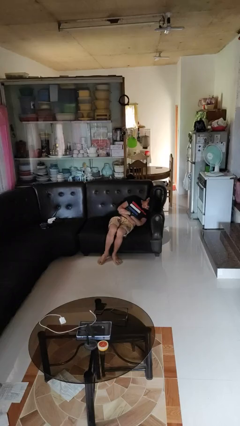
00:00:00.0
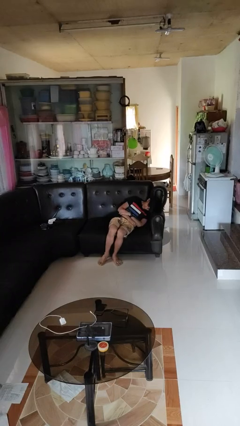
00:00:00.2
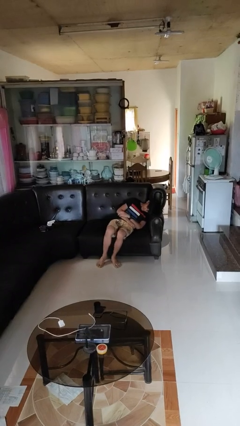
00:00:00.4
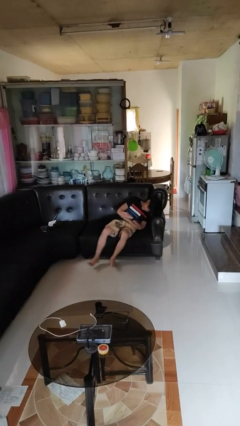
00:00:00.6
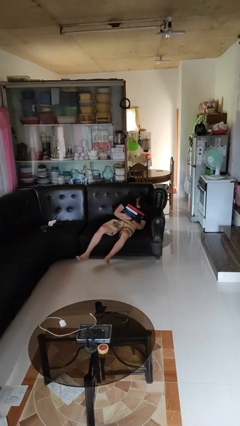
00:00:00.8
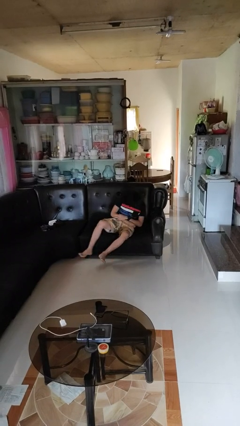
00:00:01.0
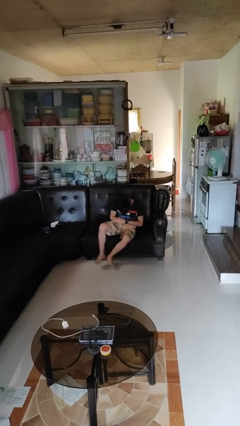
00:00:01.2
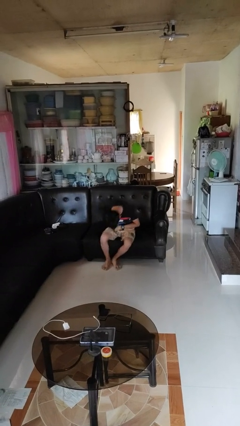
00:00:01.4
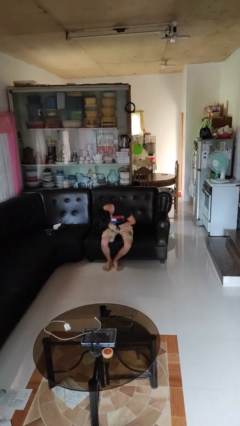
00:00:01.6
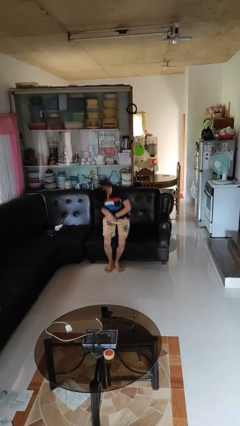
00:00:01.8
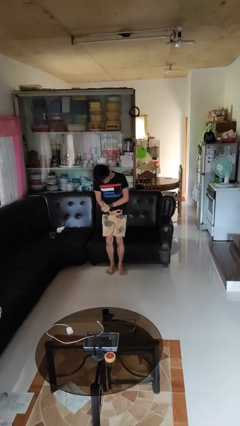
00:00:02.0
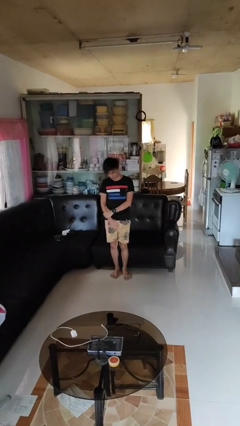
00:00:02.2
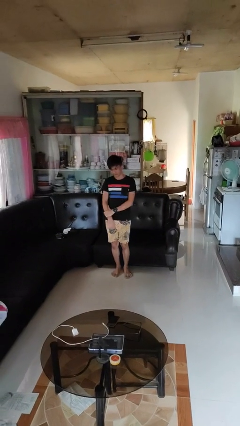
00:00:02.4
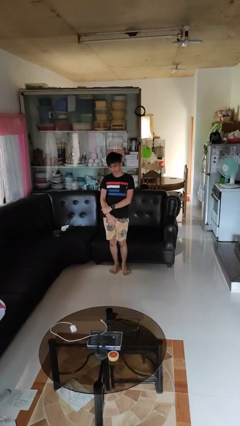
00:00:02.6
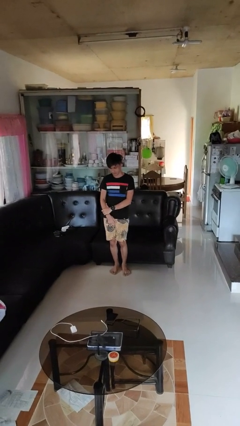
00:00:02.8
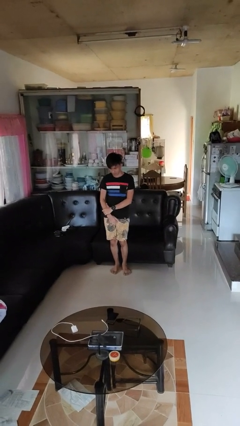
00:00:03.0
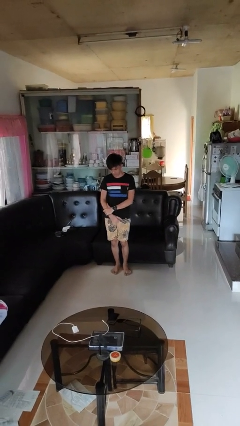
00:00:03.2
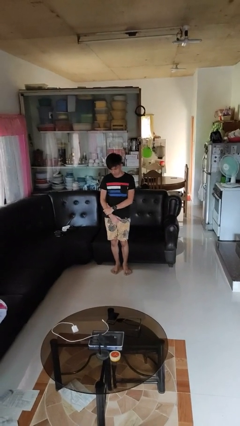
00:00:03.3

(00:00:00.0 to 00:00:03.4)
person stands up

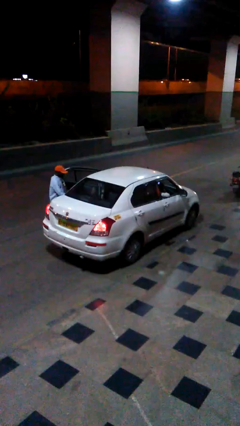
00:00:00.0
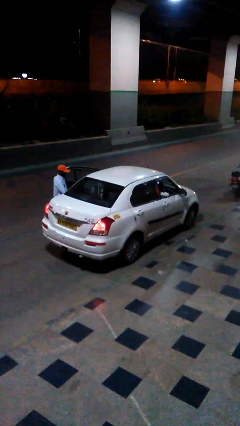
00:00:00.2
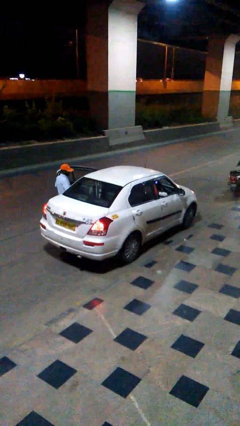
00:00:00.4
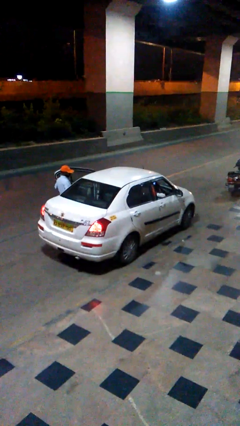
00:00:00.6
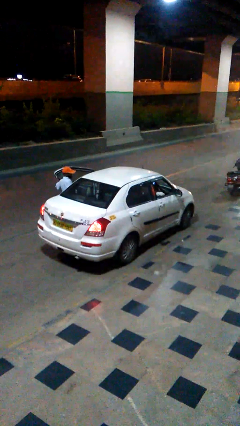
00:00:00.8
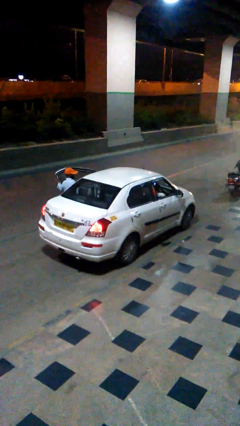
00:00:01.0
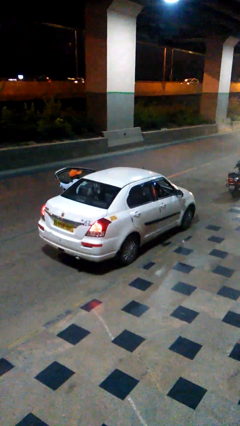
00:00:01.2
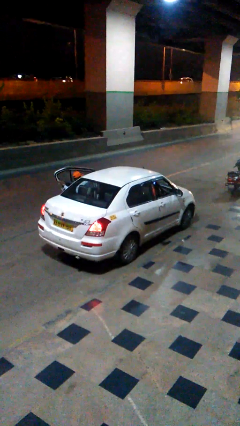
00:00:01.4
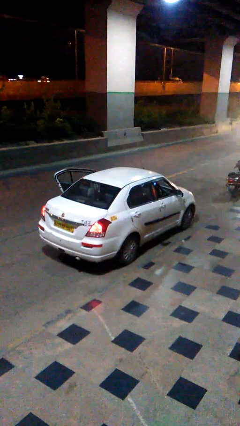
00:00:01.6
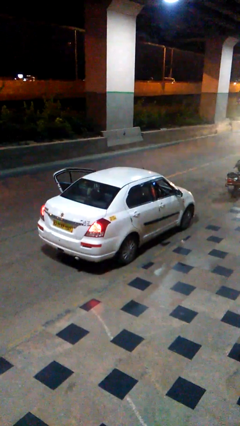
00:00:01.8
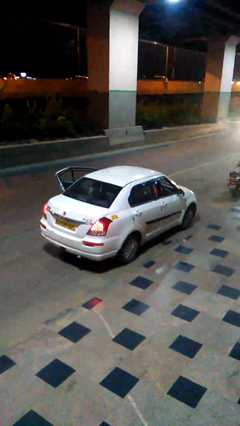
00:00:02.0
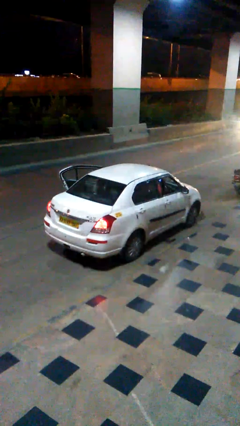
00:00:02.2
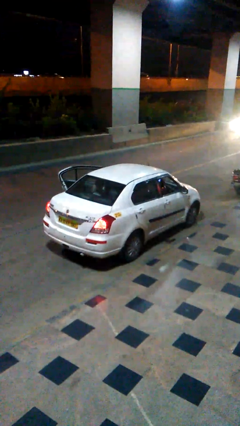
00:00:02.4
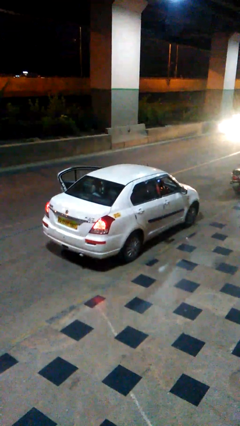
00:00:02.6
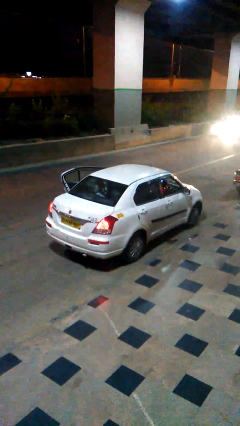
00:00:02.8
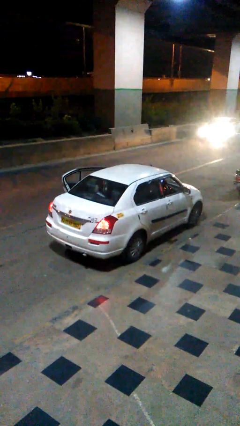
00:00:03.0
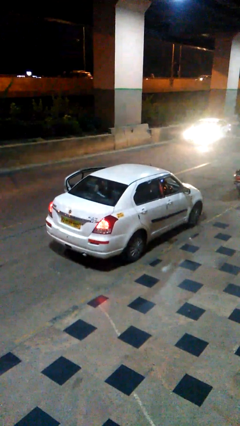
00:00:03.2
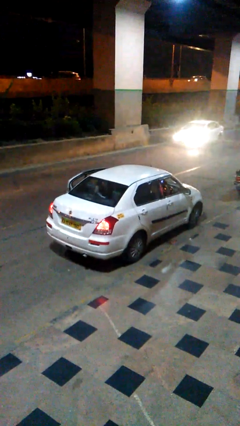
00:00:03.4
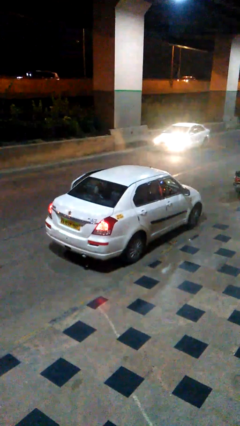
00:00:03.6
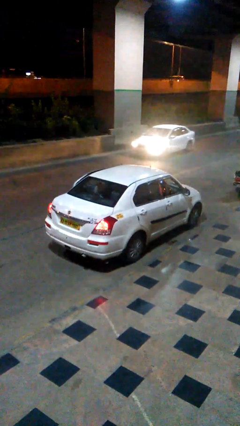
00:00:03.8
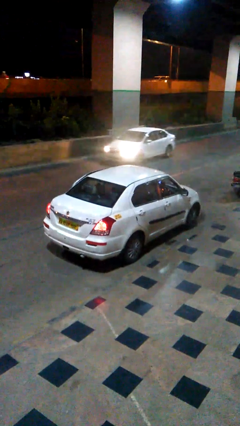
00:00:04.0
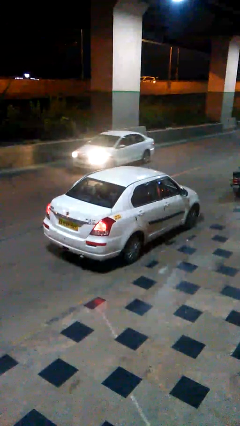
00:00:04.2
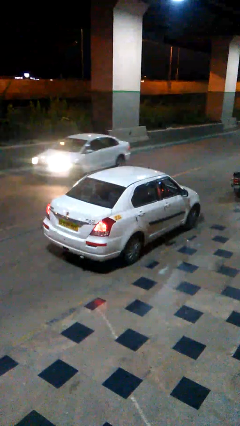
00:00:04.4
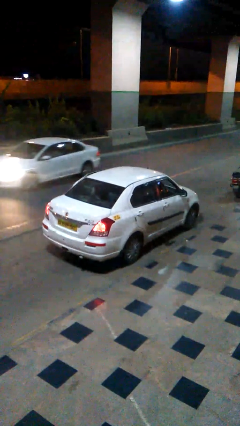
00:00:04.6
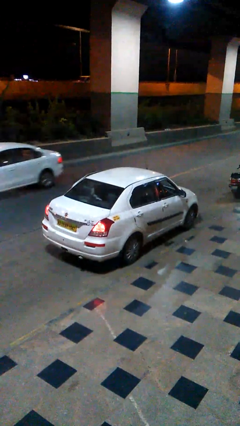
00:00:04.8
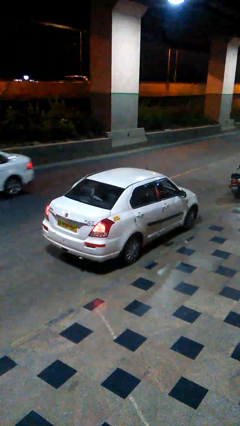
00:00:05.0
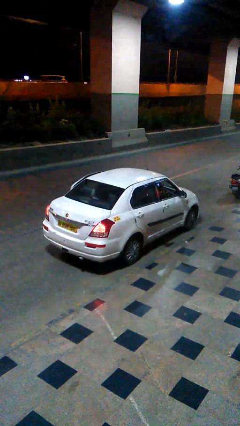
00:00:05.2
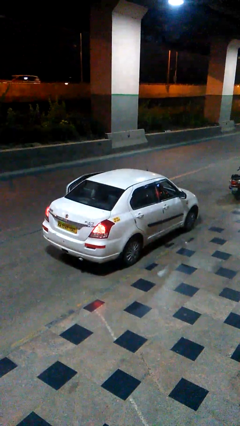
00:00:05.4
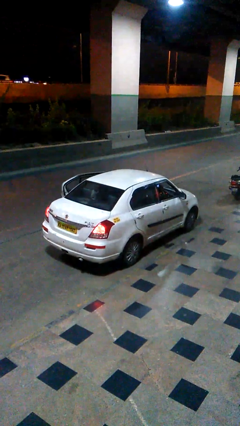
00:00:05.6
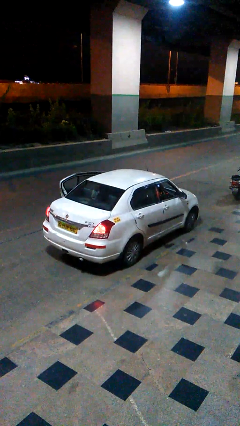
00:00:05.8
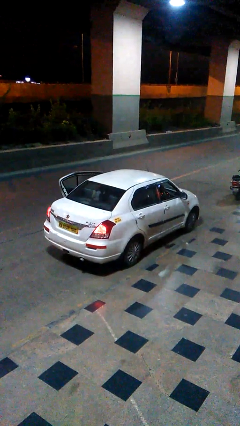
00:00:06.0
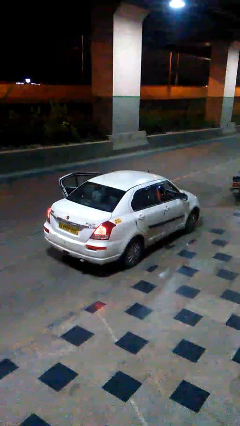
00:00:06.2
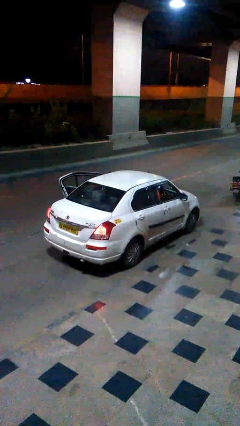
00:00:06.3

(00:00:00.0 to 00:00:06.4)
car picks up person

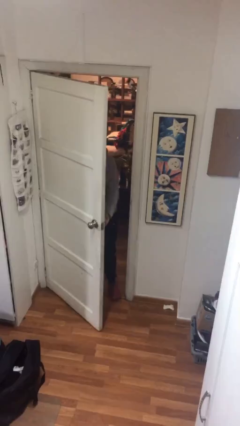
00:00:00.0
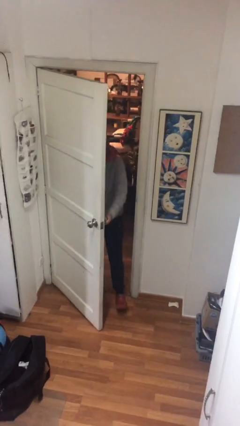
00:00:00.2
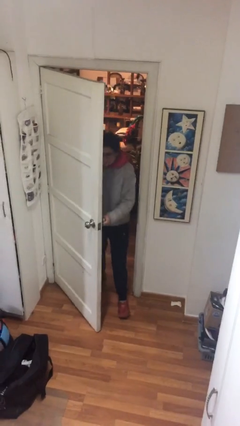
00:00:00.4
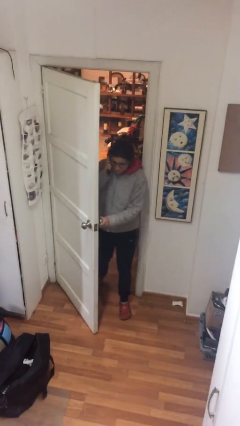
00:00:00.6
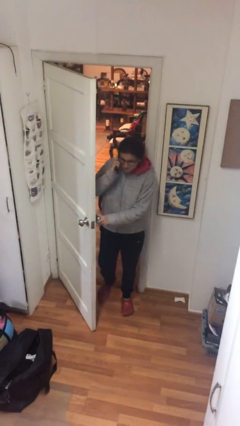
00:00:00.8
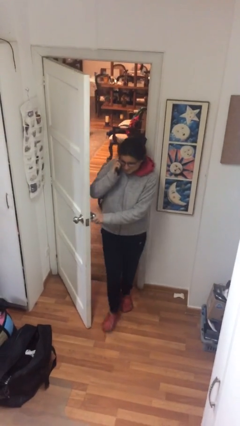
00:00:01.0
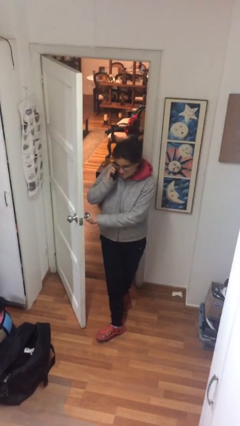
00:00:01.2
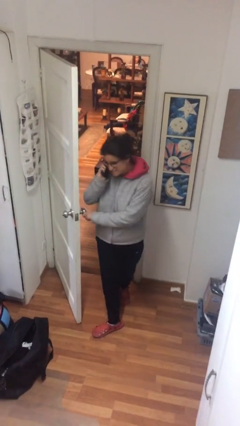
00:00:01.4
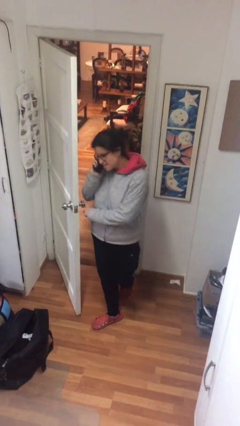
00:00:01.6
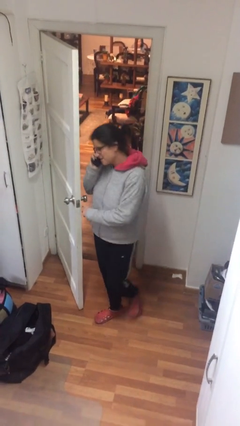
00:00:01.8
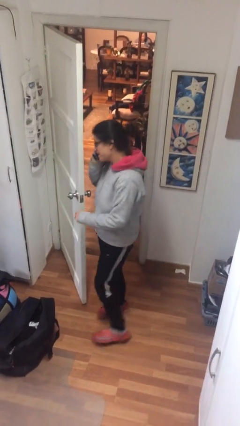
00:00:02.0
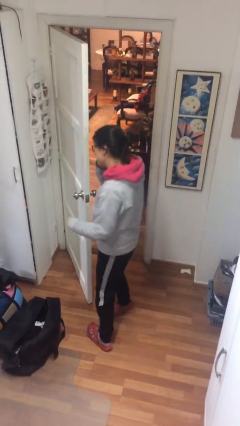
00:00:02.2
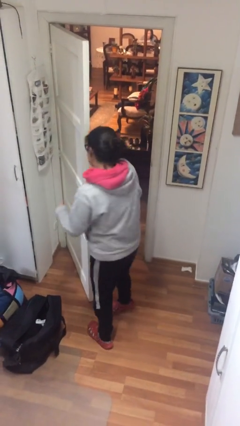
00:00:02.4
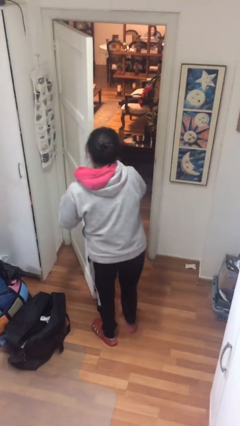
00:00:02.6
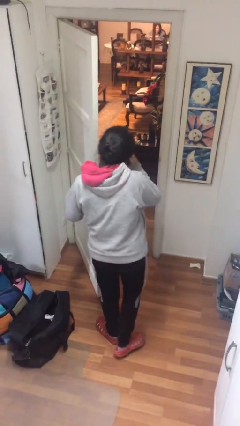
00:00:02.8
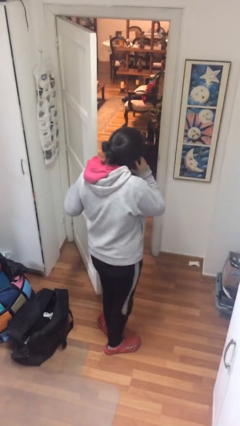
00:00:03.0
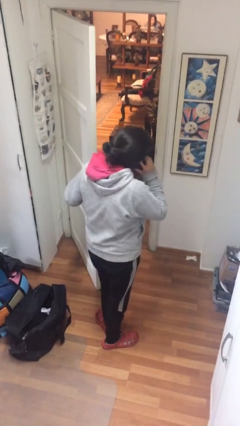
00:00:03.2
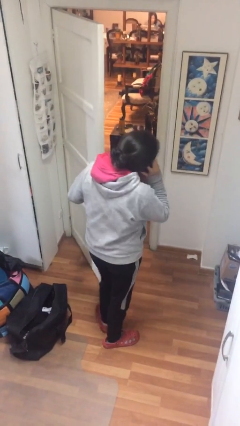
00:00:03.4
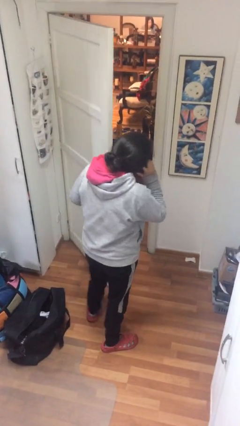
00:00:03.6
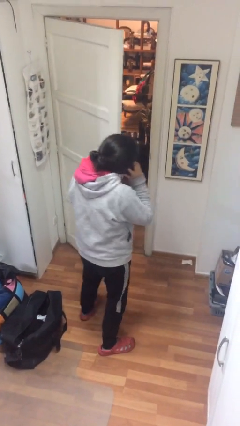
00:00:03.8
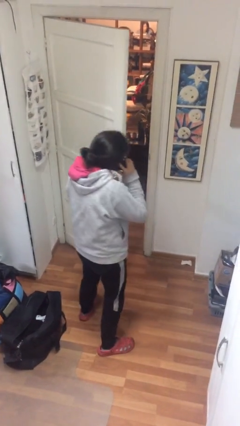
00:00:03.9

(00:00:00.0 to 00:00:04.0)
person enters scene through structure

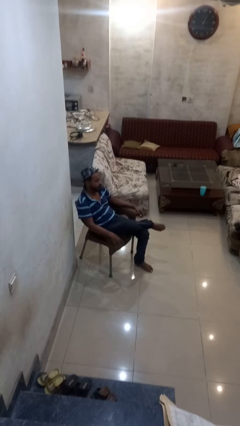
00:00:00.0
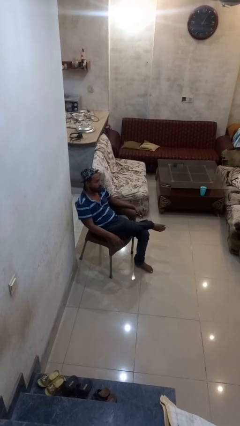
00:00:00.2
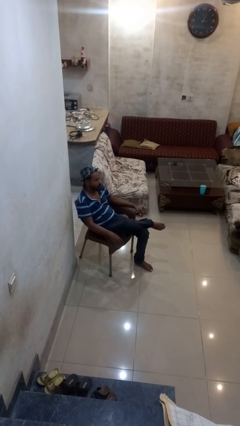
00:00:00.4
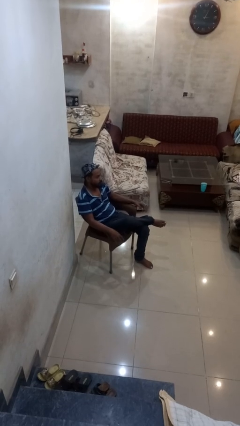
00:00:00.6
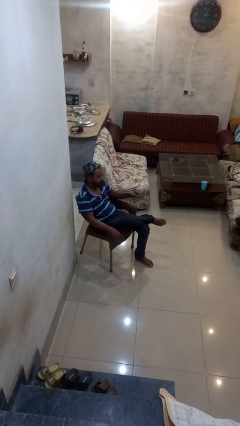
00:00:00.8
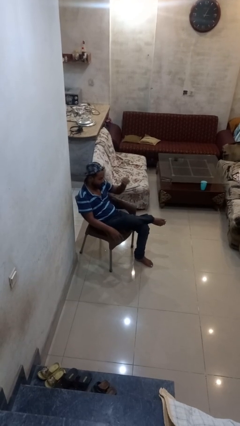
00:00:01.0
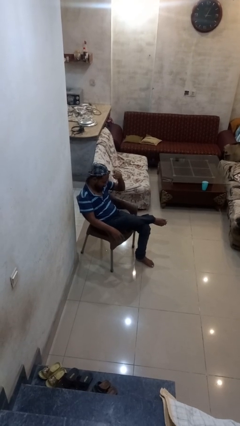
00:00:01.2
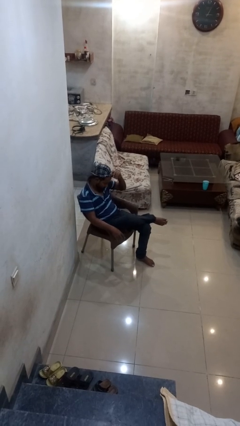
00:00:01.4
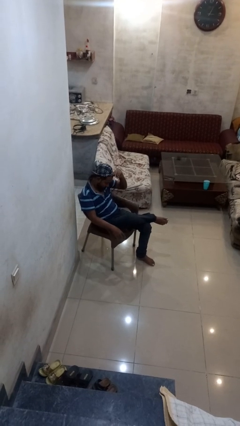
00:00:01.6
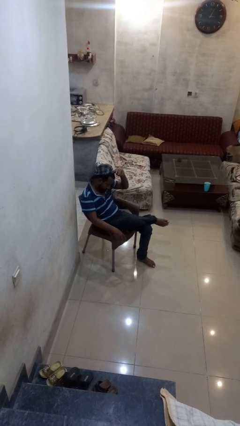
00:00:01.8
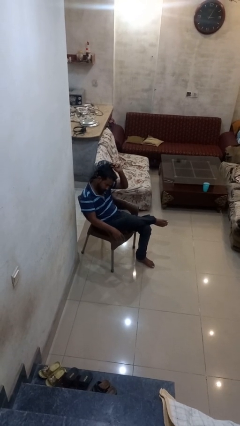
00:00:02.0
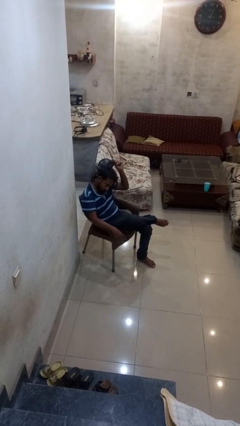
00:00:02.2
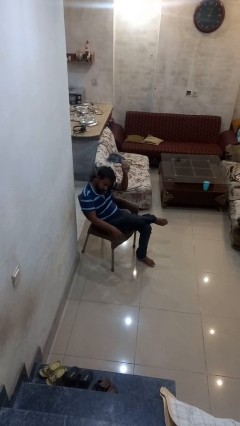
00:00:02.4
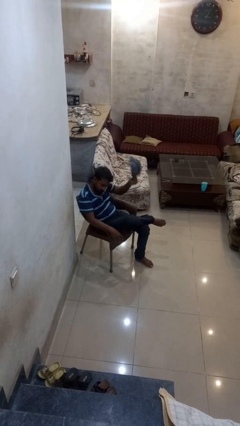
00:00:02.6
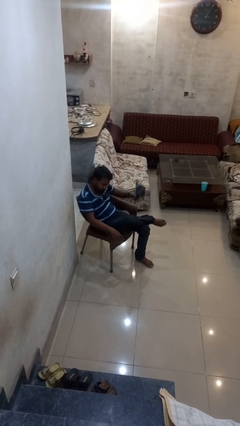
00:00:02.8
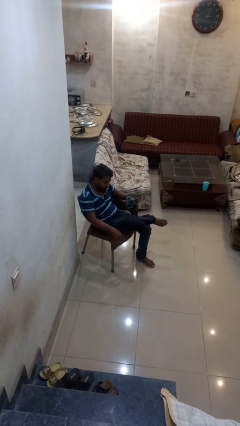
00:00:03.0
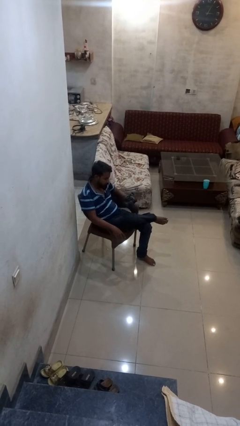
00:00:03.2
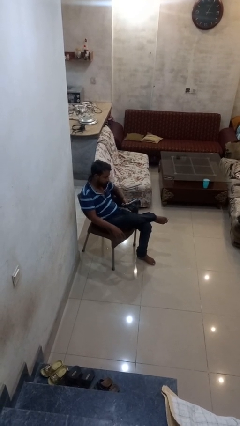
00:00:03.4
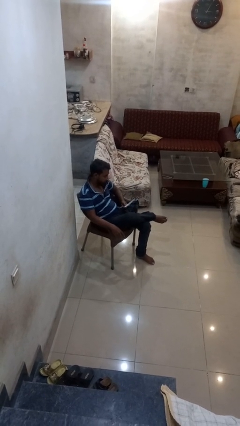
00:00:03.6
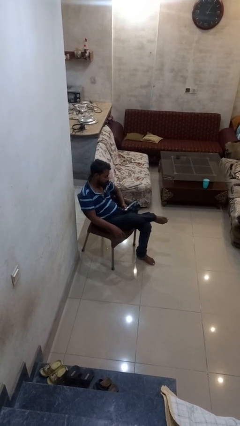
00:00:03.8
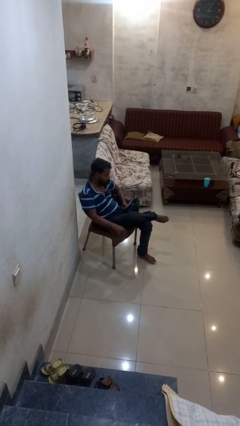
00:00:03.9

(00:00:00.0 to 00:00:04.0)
person takes off hat

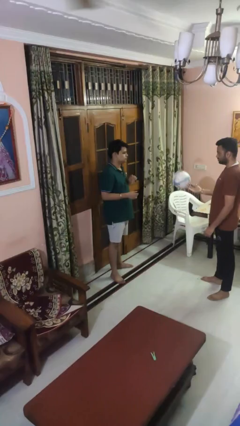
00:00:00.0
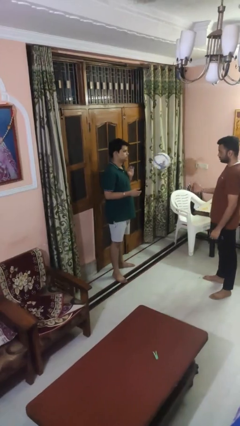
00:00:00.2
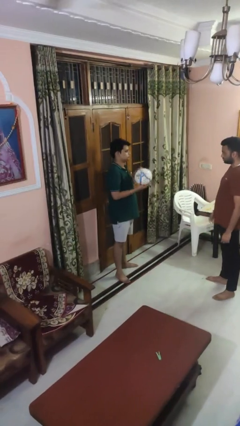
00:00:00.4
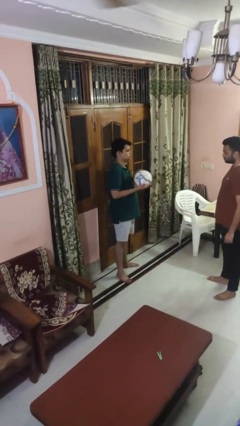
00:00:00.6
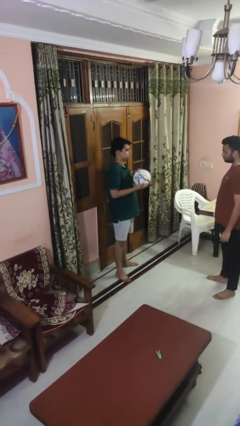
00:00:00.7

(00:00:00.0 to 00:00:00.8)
person catches object from person
